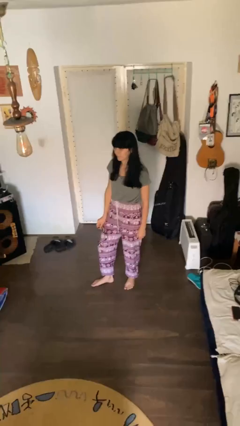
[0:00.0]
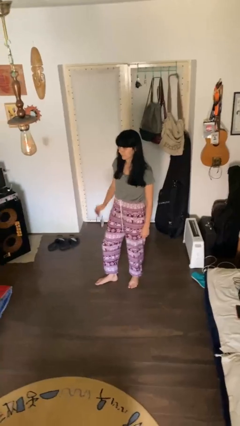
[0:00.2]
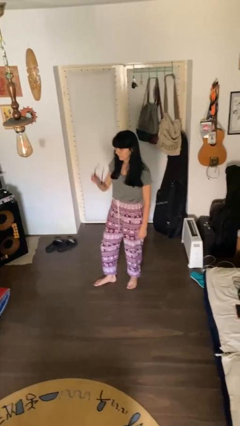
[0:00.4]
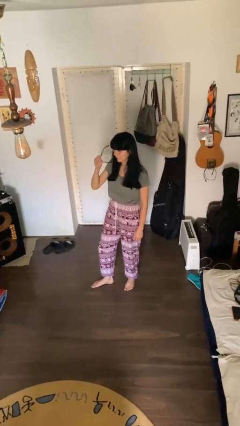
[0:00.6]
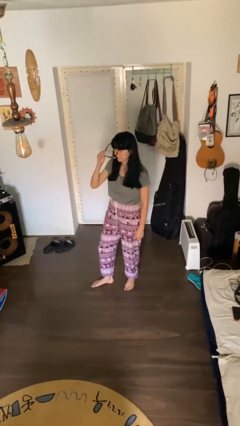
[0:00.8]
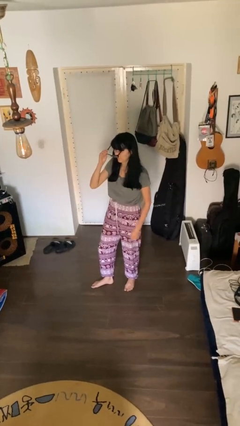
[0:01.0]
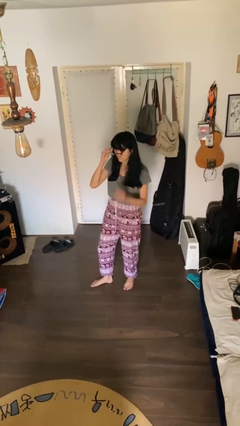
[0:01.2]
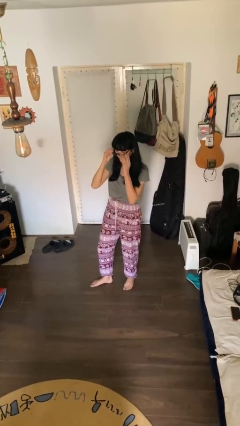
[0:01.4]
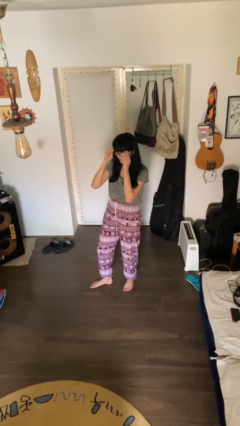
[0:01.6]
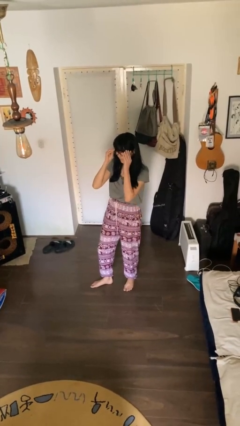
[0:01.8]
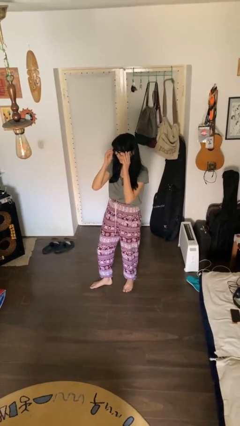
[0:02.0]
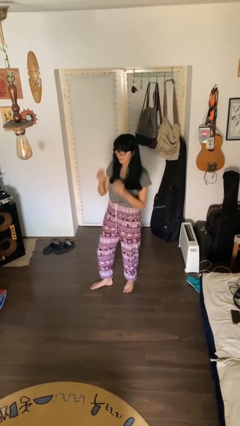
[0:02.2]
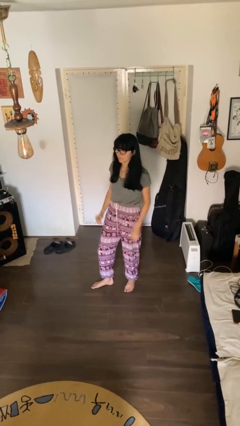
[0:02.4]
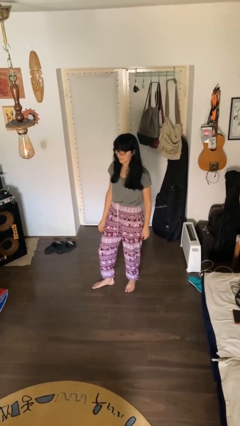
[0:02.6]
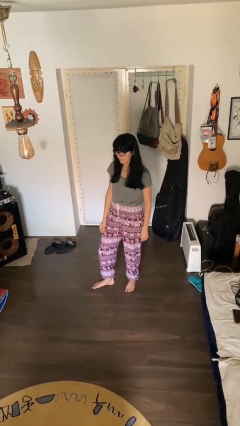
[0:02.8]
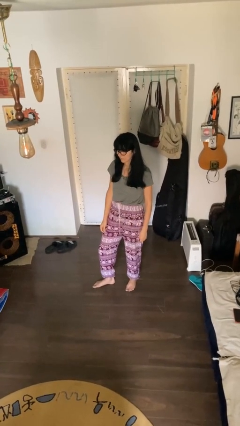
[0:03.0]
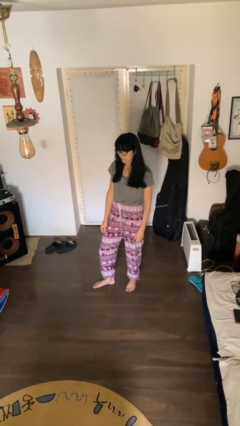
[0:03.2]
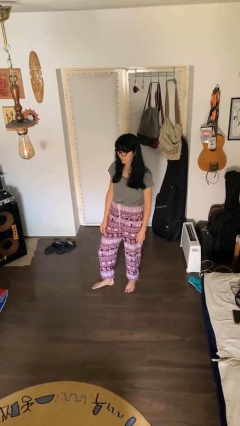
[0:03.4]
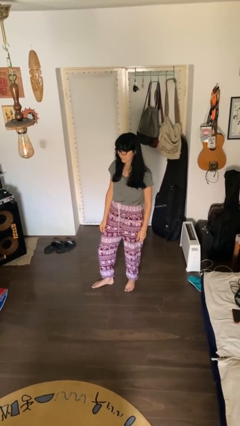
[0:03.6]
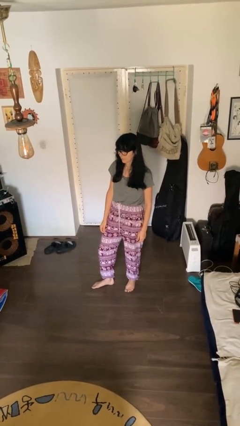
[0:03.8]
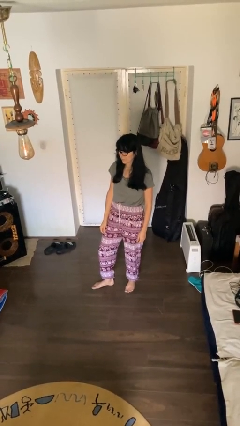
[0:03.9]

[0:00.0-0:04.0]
person puts on glasses

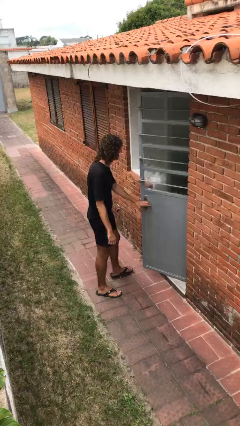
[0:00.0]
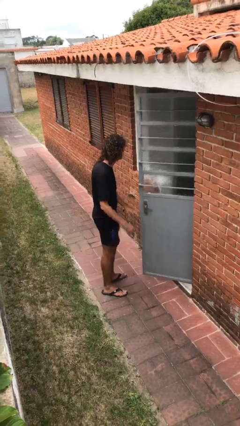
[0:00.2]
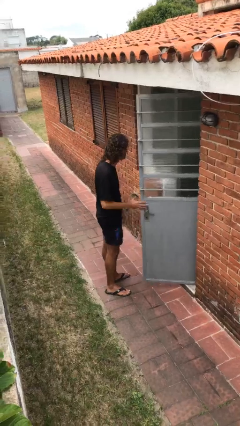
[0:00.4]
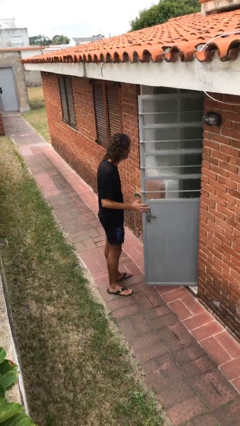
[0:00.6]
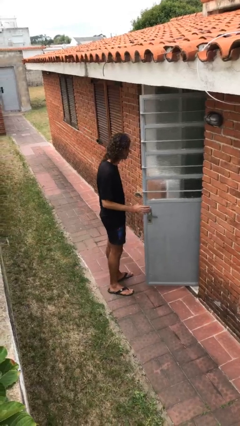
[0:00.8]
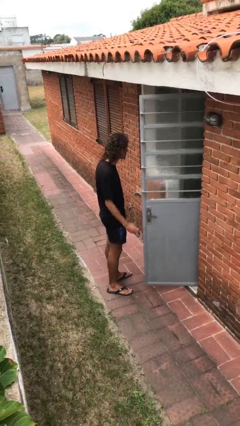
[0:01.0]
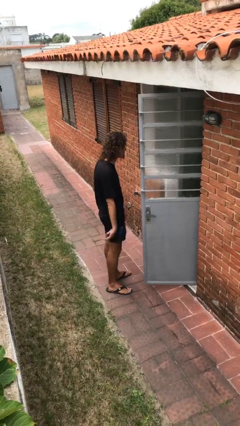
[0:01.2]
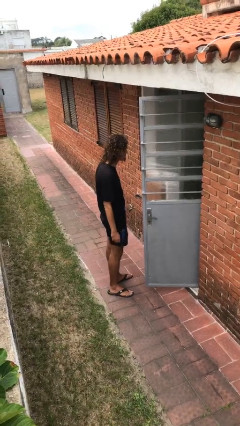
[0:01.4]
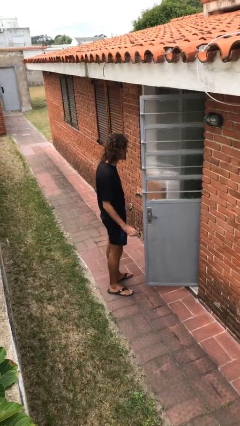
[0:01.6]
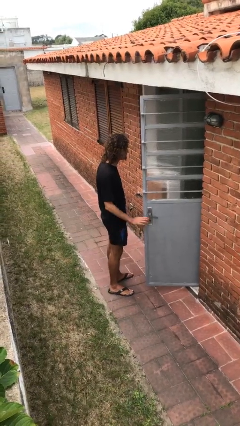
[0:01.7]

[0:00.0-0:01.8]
person opens facility door

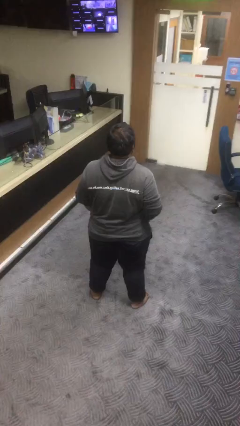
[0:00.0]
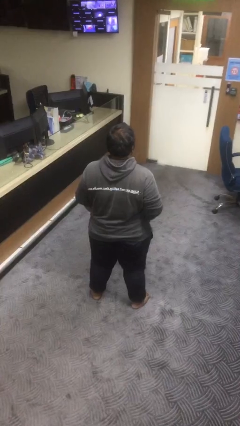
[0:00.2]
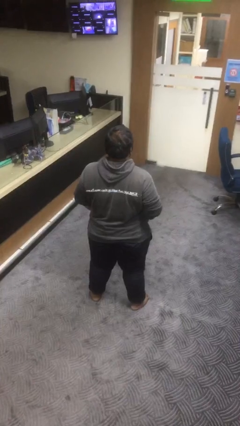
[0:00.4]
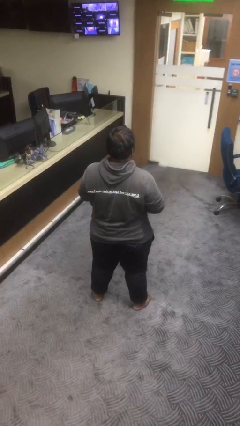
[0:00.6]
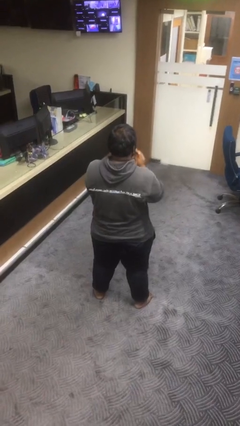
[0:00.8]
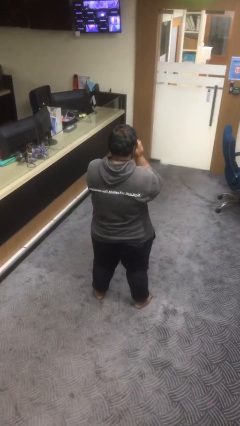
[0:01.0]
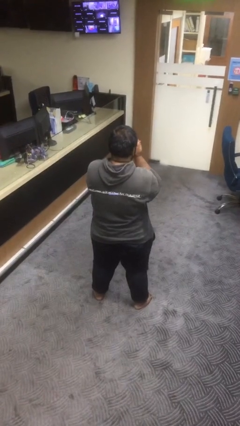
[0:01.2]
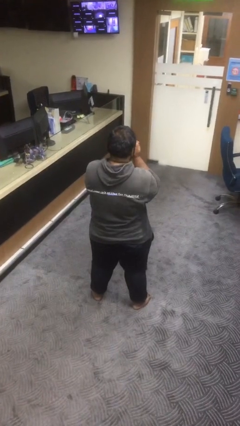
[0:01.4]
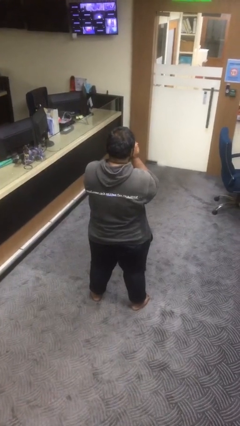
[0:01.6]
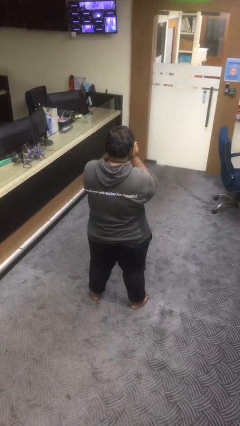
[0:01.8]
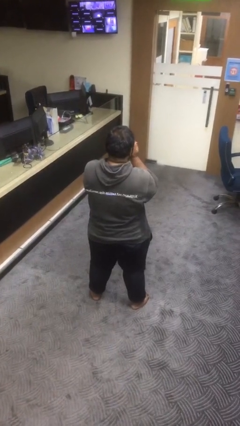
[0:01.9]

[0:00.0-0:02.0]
person prays

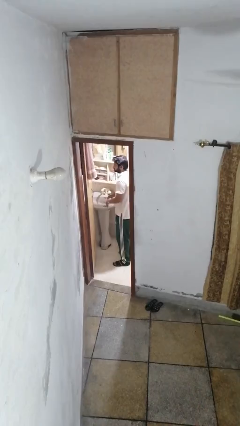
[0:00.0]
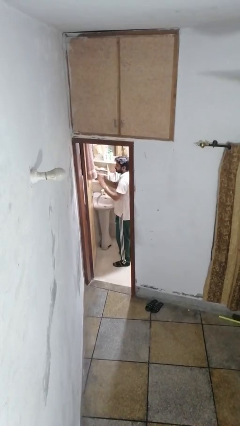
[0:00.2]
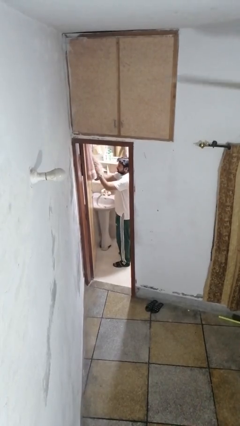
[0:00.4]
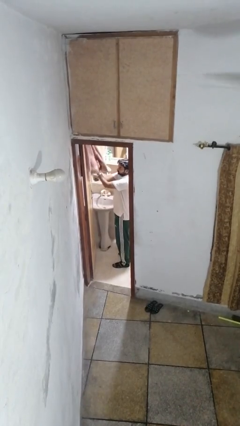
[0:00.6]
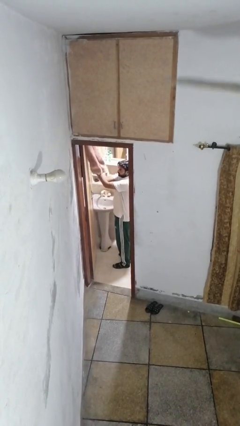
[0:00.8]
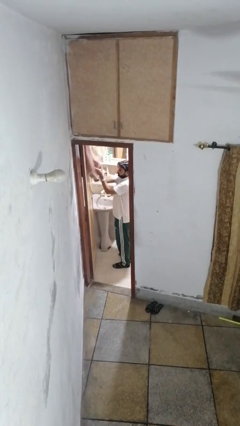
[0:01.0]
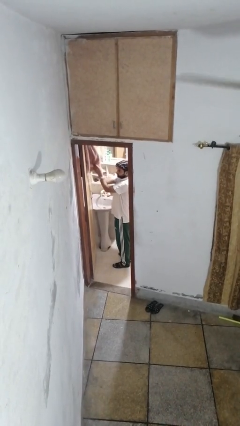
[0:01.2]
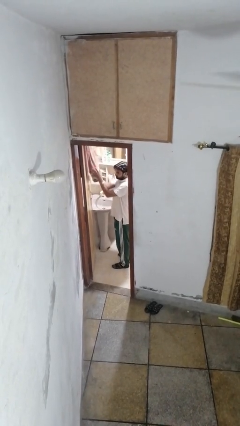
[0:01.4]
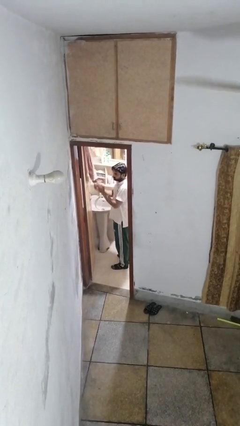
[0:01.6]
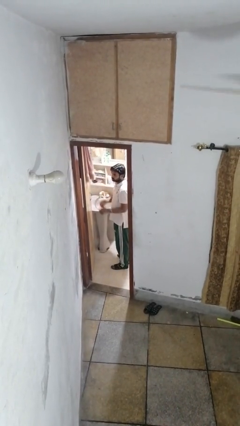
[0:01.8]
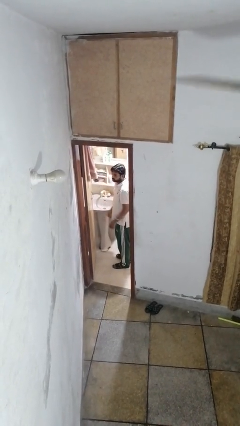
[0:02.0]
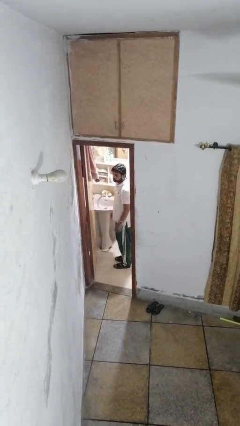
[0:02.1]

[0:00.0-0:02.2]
person dries hands with towel

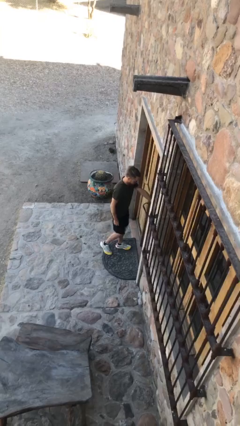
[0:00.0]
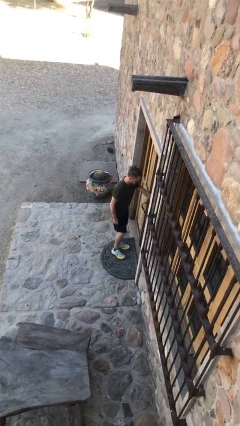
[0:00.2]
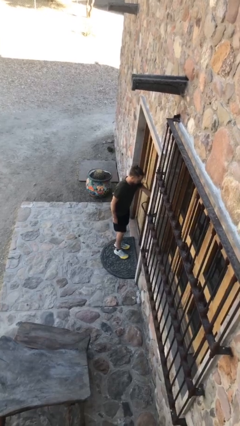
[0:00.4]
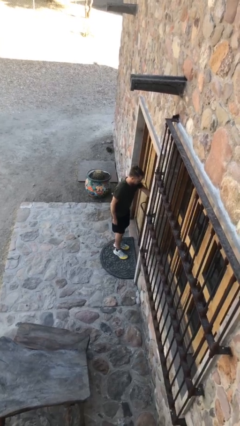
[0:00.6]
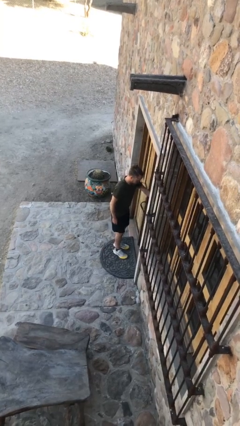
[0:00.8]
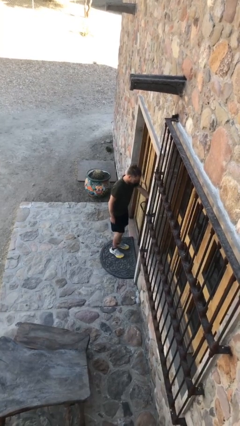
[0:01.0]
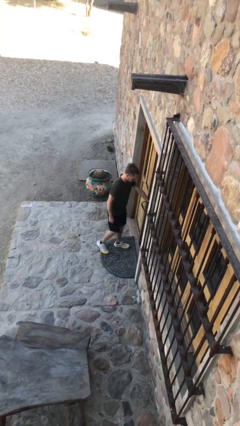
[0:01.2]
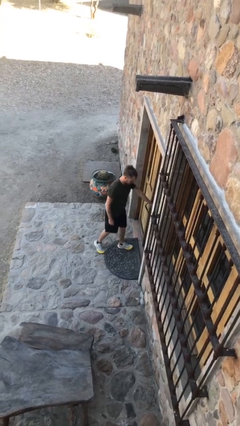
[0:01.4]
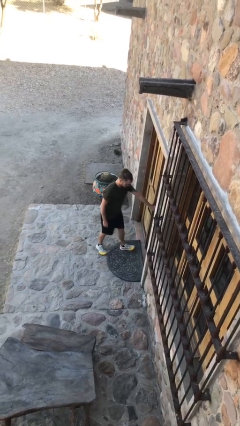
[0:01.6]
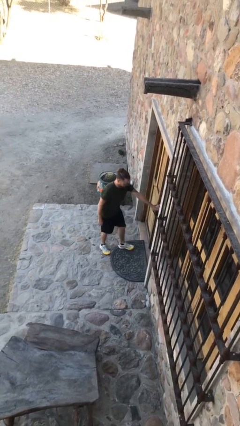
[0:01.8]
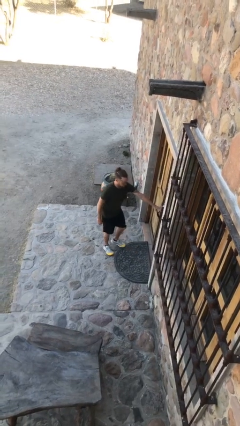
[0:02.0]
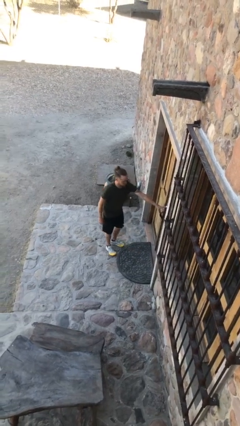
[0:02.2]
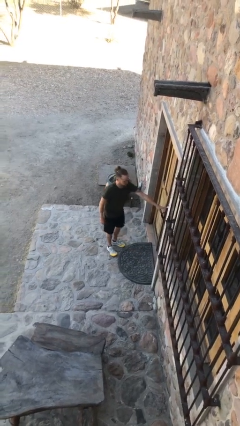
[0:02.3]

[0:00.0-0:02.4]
person closes facility door

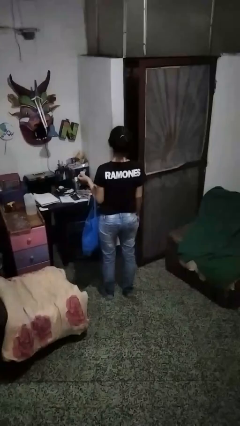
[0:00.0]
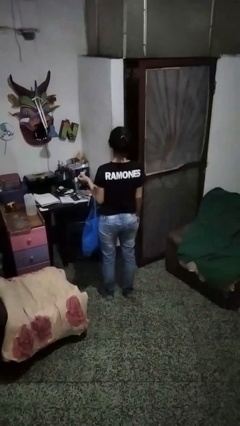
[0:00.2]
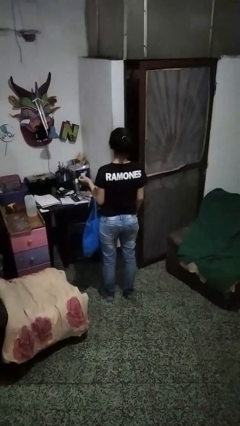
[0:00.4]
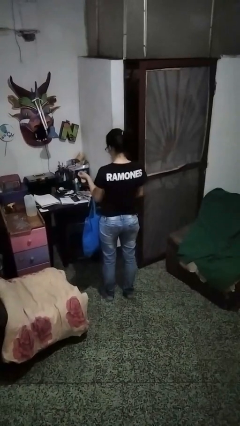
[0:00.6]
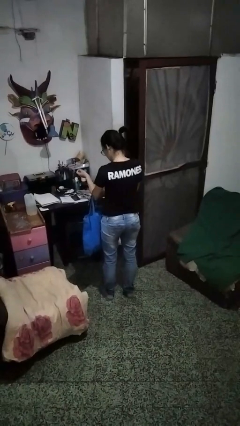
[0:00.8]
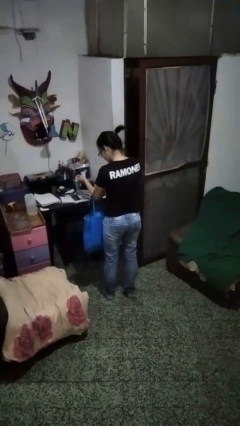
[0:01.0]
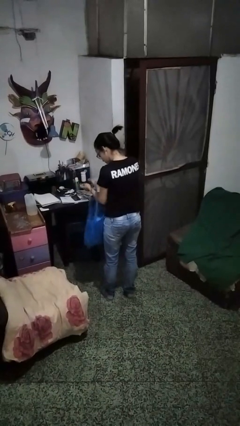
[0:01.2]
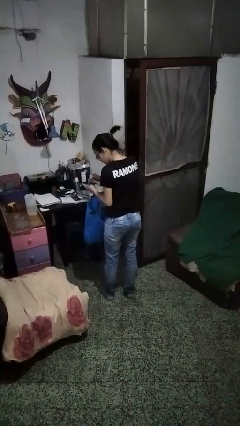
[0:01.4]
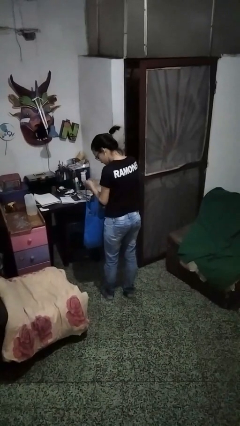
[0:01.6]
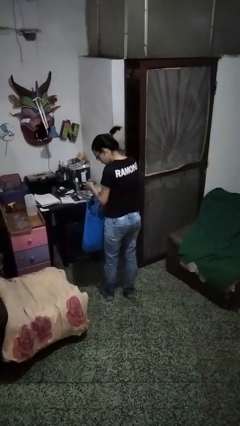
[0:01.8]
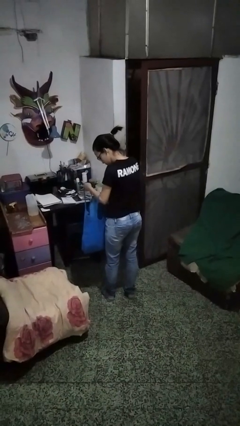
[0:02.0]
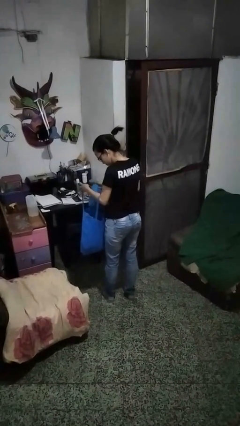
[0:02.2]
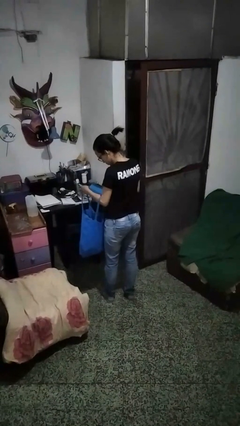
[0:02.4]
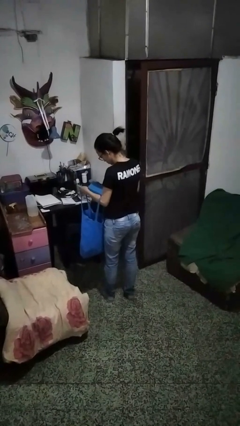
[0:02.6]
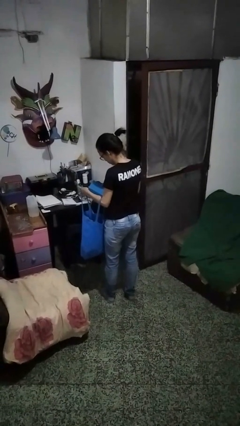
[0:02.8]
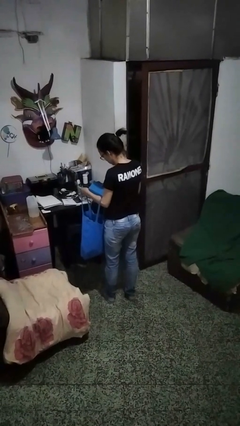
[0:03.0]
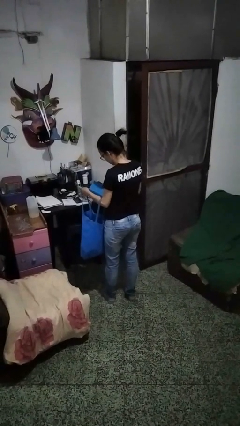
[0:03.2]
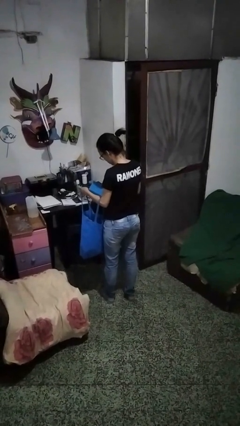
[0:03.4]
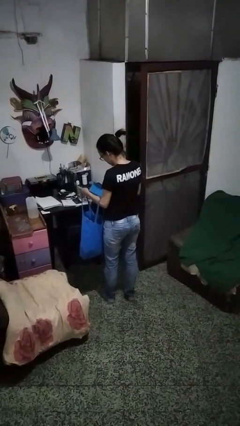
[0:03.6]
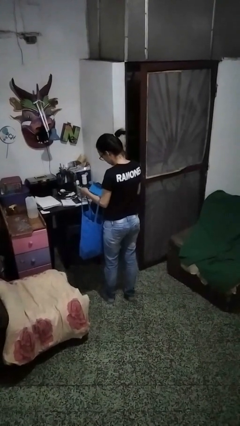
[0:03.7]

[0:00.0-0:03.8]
person takes object from bag

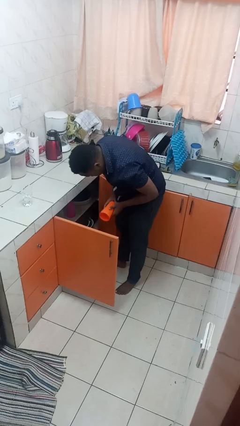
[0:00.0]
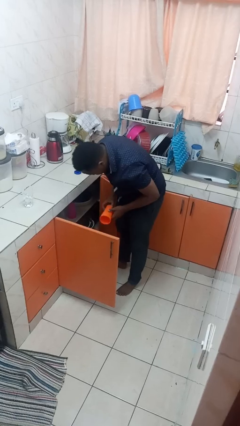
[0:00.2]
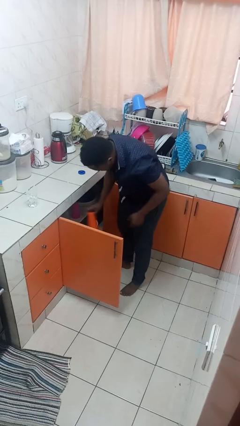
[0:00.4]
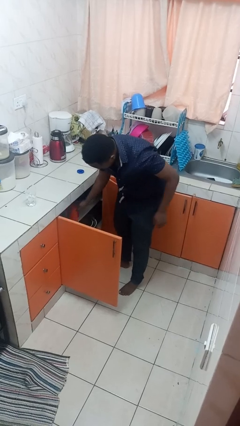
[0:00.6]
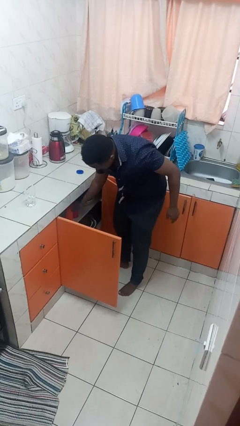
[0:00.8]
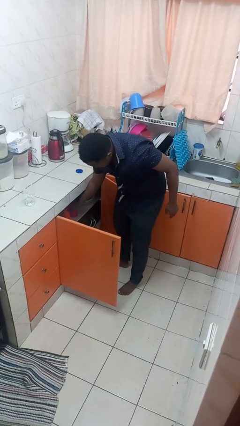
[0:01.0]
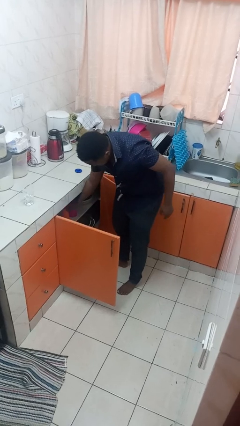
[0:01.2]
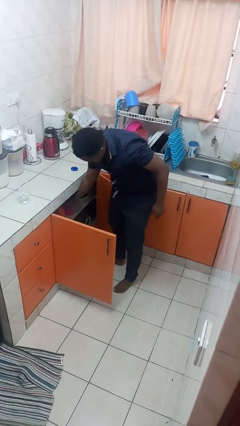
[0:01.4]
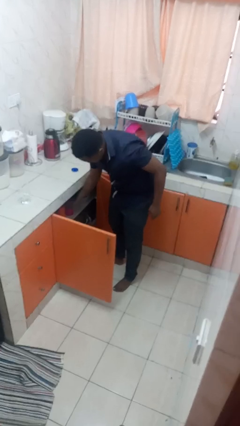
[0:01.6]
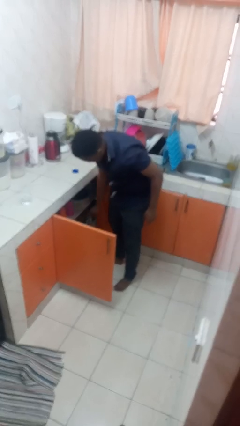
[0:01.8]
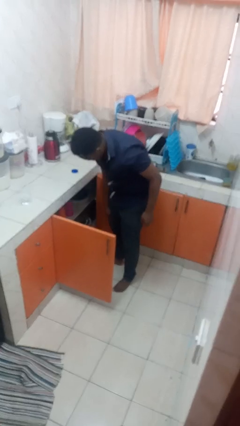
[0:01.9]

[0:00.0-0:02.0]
person puts object in cabinet
